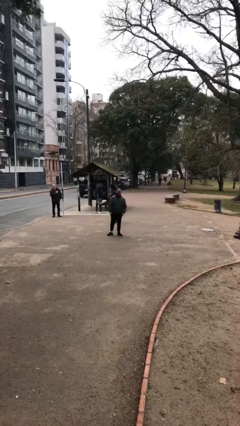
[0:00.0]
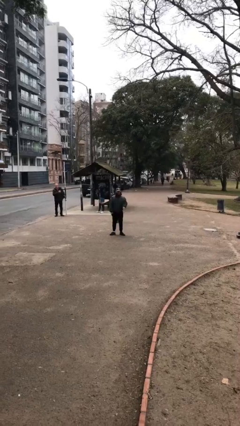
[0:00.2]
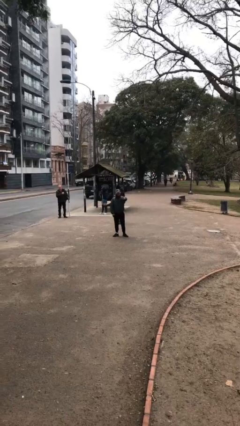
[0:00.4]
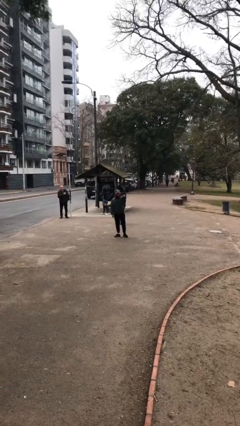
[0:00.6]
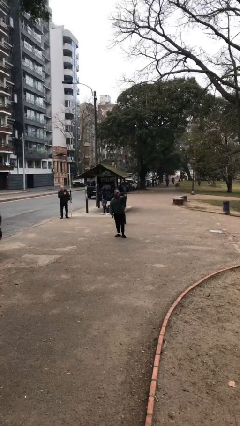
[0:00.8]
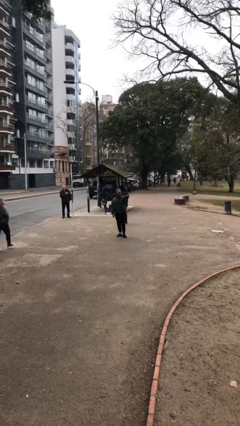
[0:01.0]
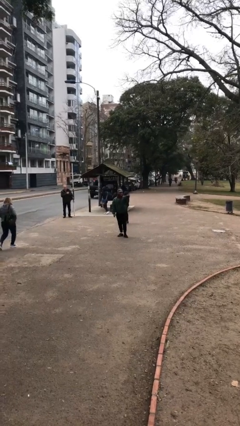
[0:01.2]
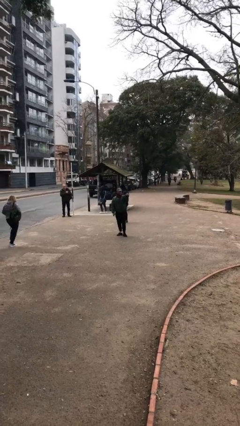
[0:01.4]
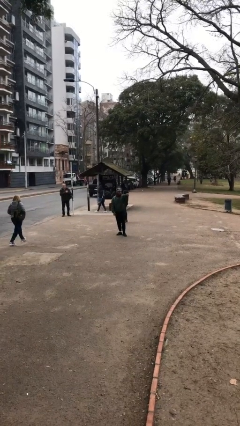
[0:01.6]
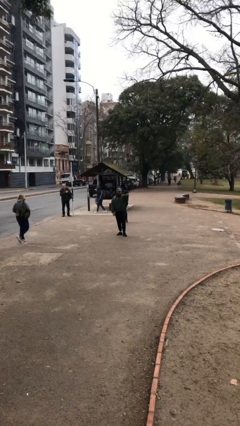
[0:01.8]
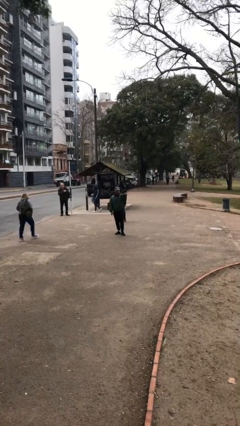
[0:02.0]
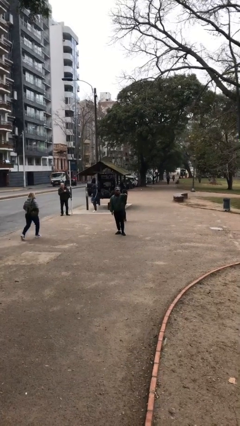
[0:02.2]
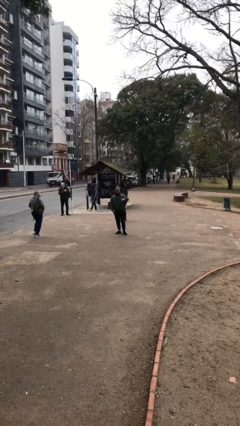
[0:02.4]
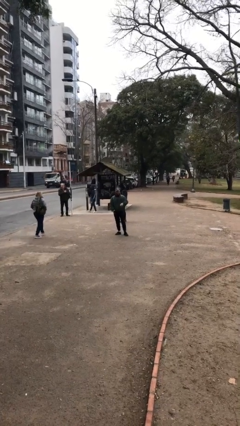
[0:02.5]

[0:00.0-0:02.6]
person points at person

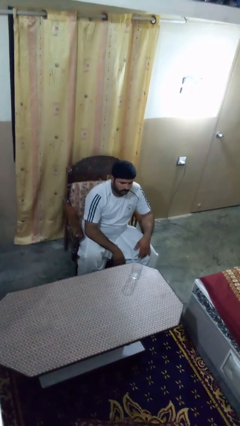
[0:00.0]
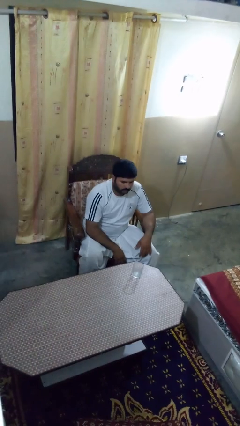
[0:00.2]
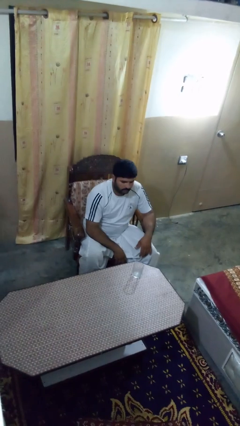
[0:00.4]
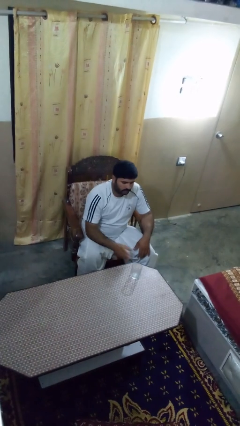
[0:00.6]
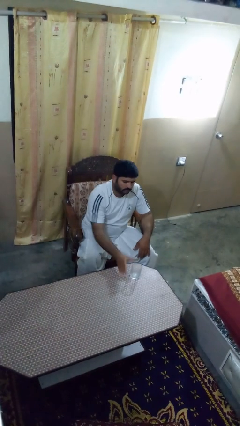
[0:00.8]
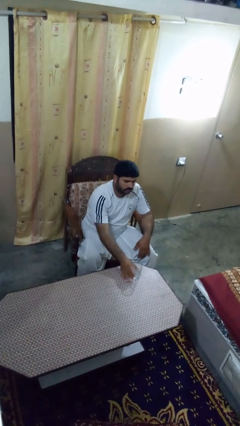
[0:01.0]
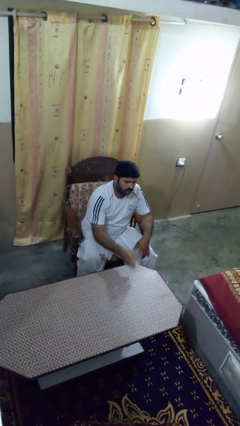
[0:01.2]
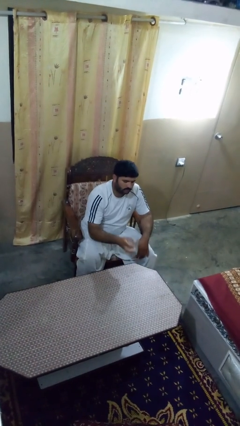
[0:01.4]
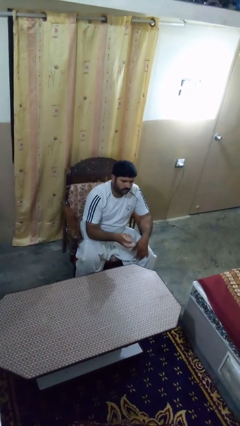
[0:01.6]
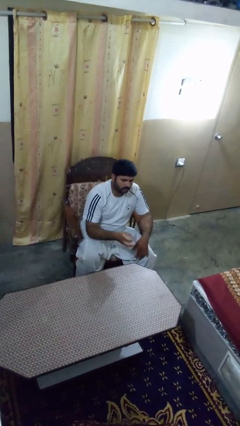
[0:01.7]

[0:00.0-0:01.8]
person picks up object from table

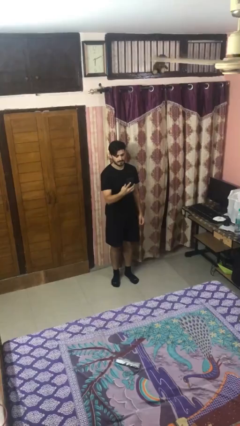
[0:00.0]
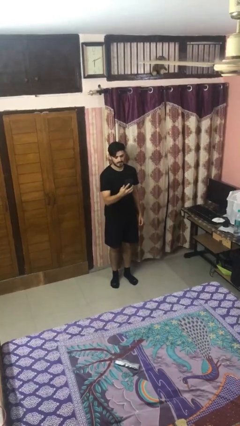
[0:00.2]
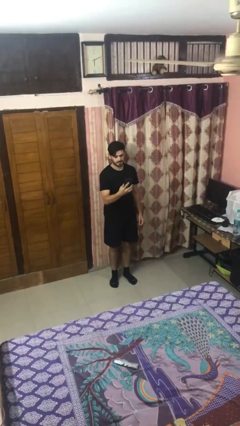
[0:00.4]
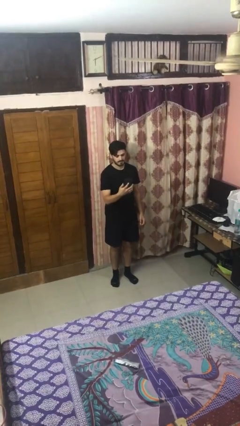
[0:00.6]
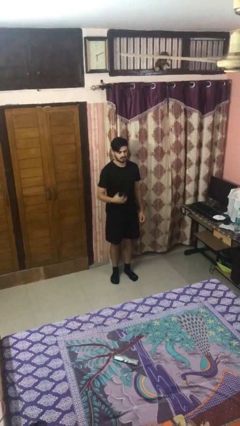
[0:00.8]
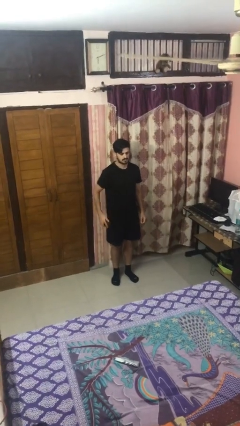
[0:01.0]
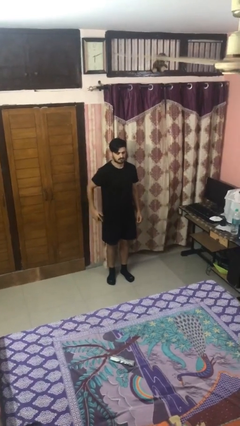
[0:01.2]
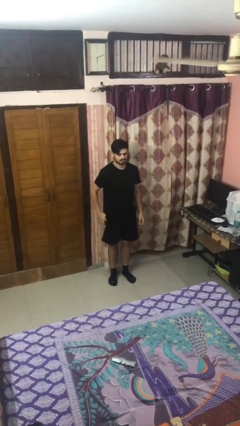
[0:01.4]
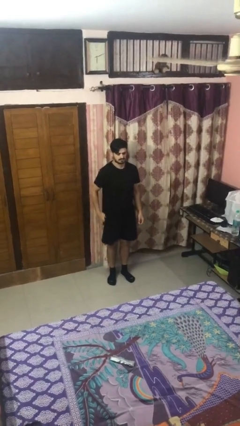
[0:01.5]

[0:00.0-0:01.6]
person puts phone into pocket

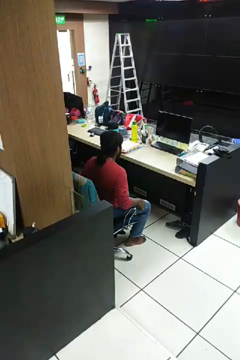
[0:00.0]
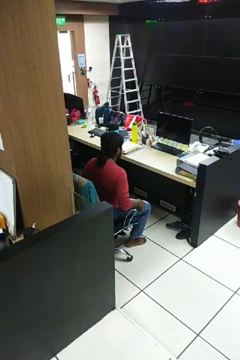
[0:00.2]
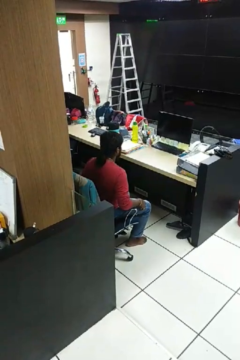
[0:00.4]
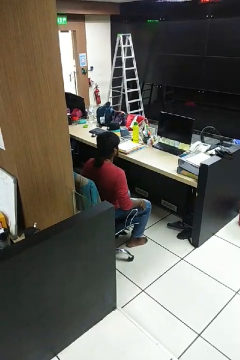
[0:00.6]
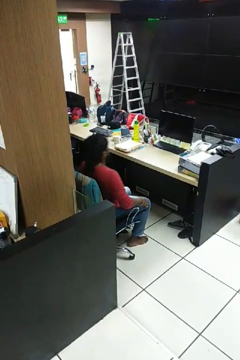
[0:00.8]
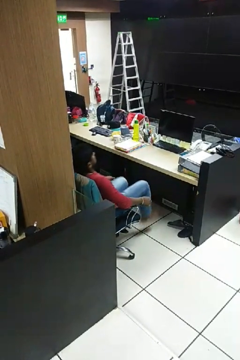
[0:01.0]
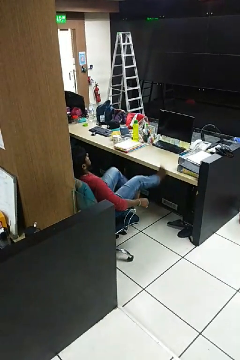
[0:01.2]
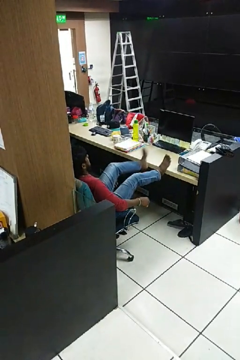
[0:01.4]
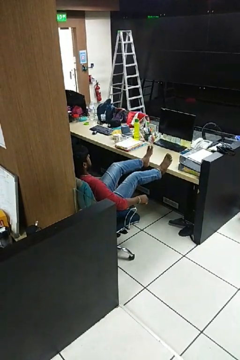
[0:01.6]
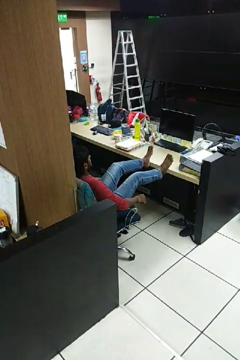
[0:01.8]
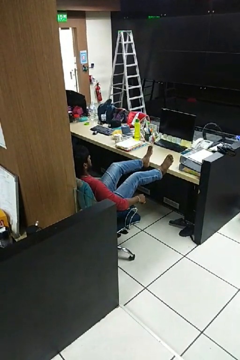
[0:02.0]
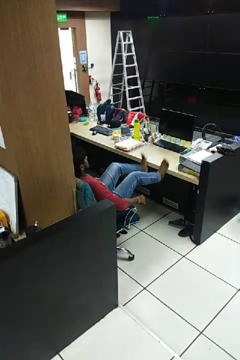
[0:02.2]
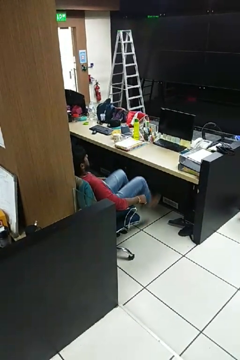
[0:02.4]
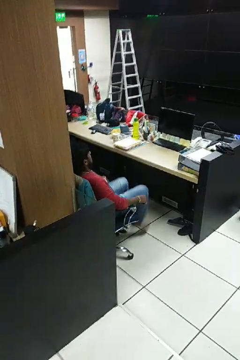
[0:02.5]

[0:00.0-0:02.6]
person puts feet up

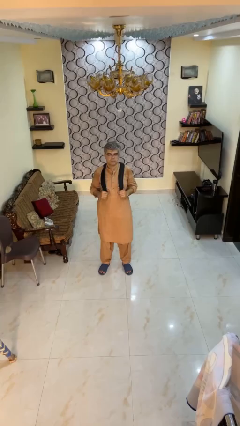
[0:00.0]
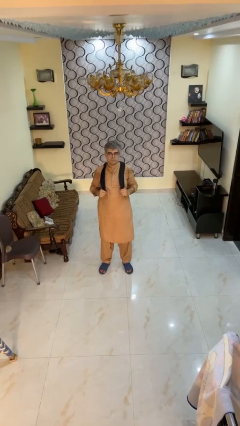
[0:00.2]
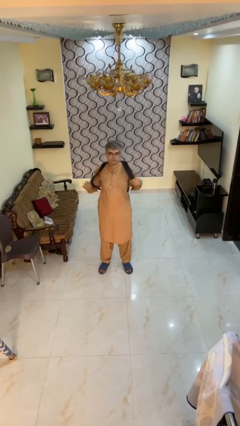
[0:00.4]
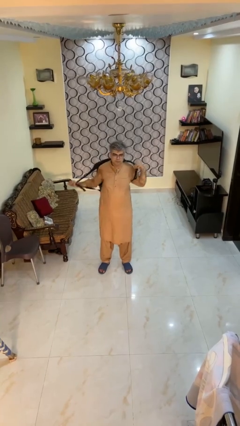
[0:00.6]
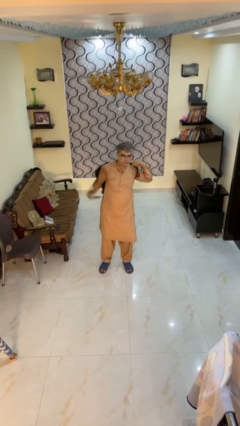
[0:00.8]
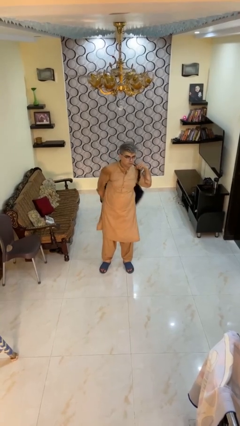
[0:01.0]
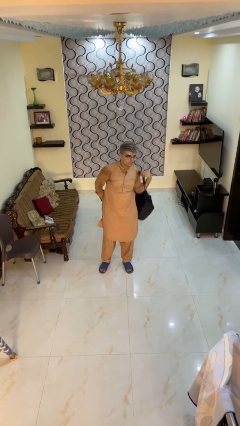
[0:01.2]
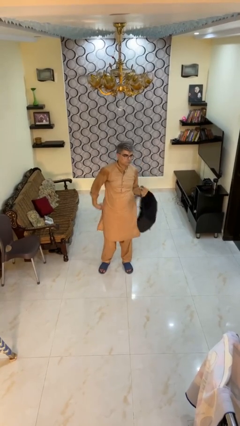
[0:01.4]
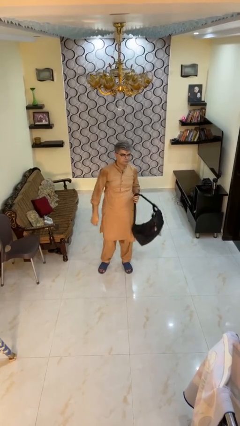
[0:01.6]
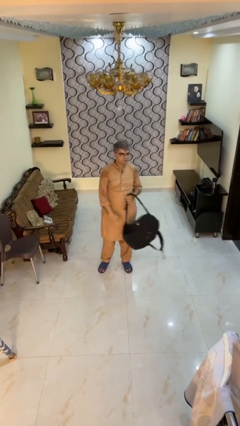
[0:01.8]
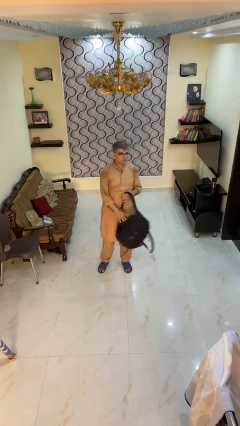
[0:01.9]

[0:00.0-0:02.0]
person takes off backpack

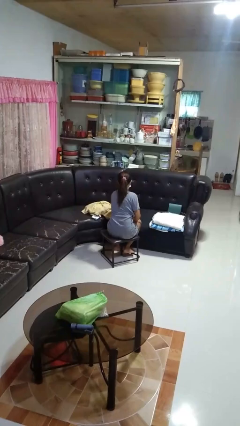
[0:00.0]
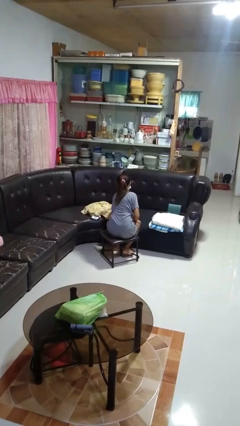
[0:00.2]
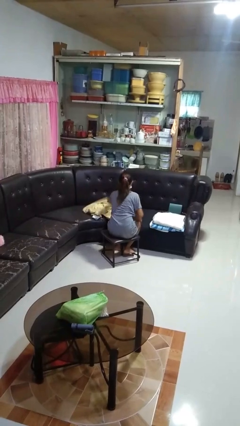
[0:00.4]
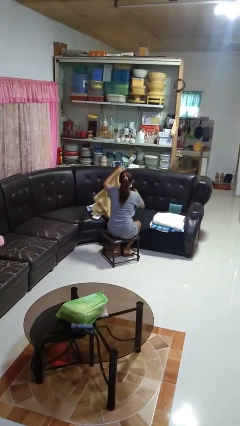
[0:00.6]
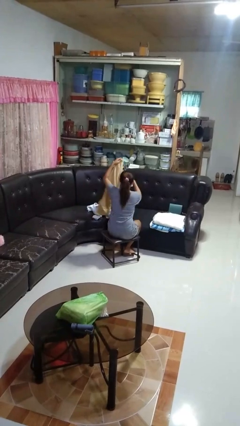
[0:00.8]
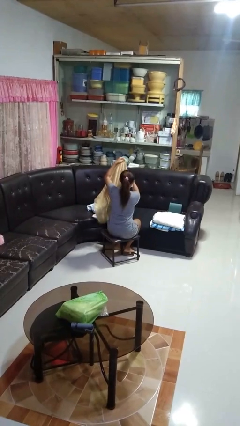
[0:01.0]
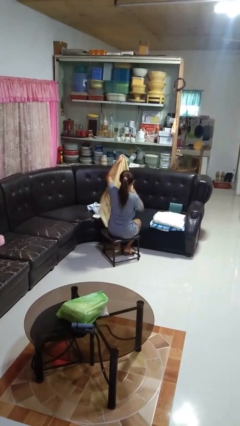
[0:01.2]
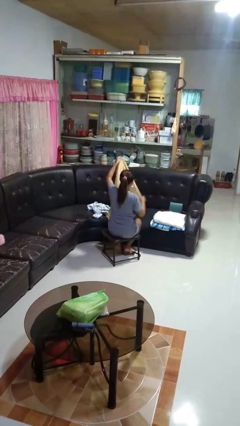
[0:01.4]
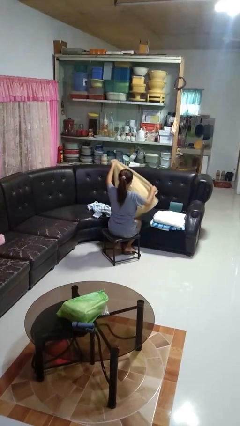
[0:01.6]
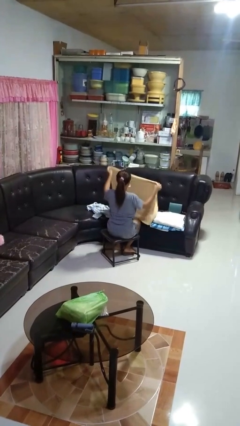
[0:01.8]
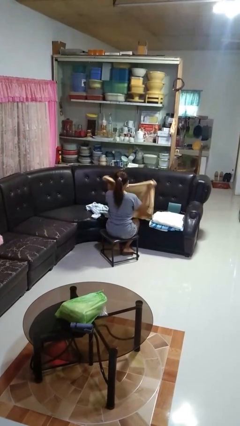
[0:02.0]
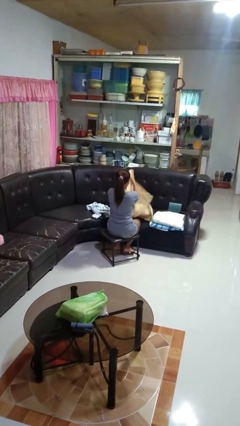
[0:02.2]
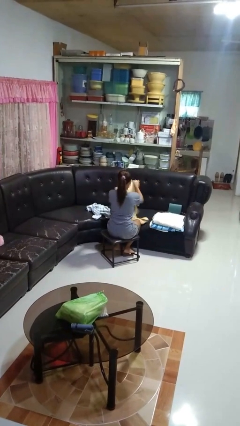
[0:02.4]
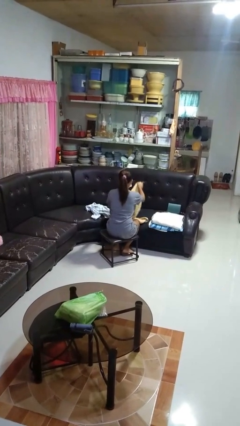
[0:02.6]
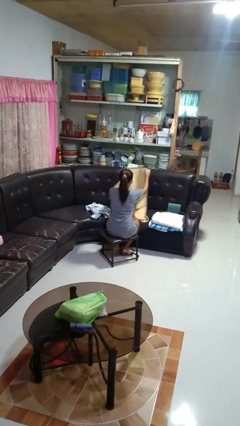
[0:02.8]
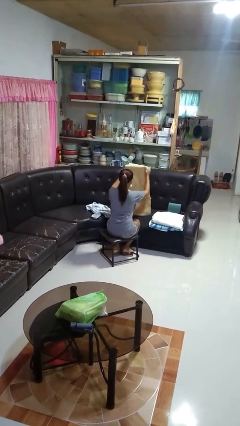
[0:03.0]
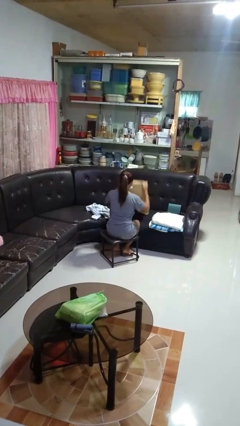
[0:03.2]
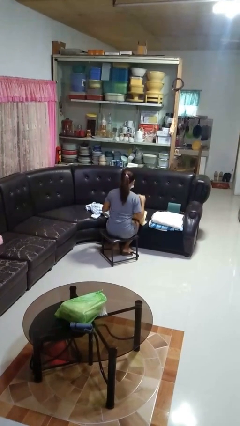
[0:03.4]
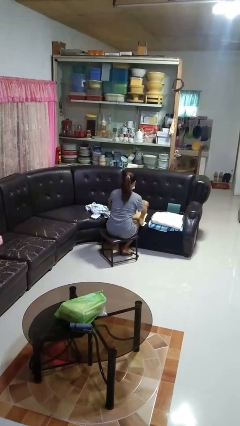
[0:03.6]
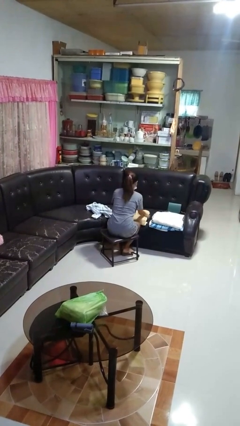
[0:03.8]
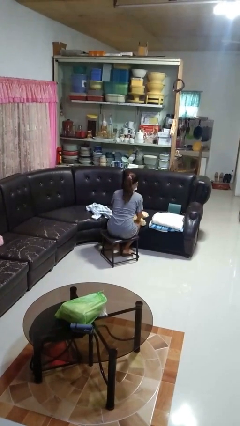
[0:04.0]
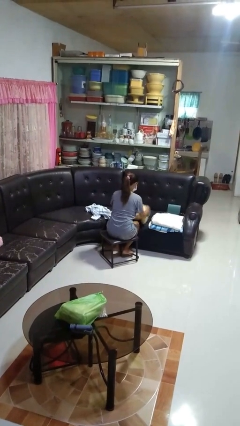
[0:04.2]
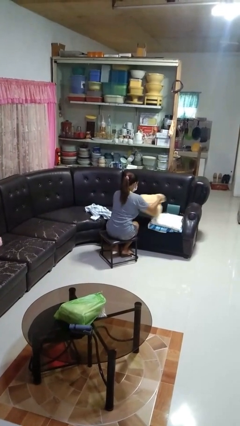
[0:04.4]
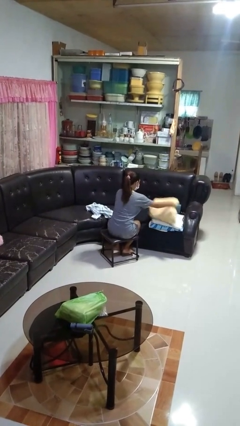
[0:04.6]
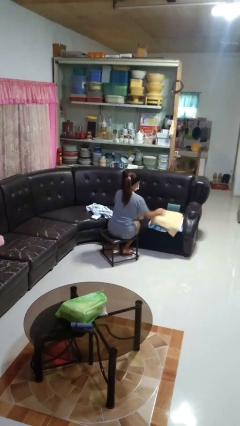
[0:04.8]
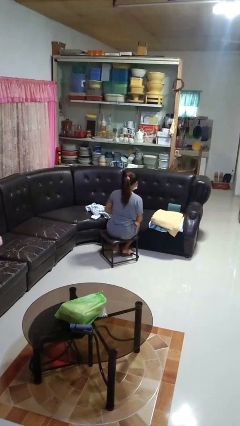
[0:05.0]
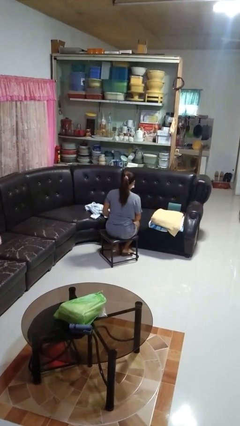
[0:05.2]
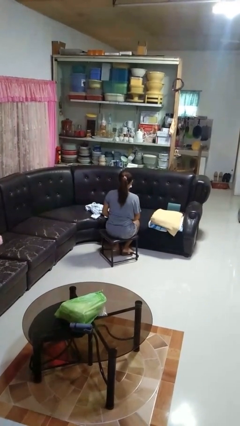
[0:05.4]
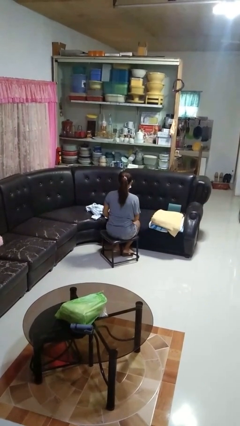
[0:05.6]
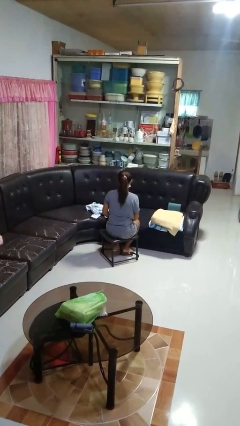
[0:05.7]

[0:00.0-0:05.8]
person folds towel

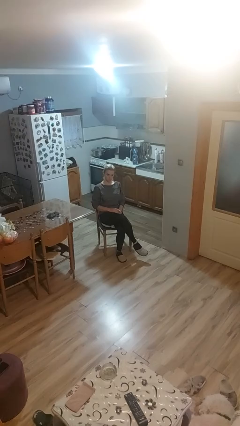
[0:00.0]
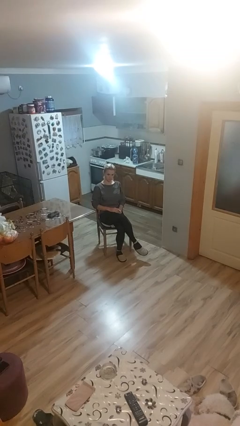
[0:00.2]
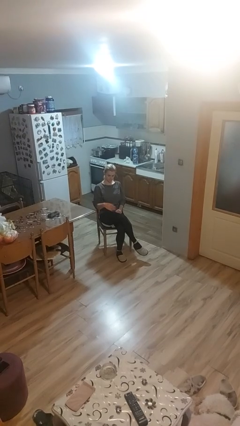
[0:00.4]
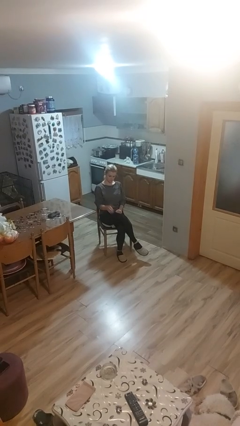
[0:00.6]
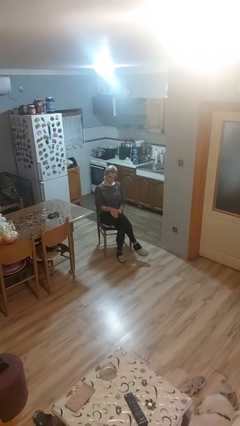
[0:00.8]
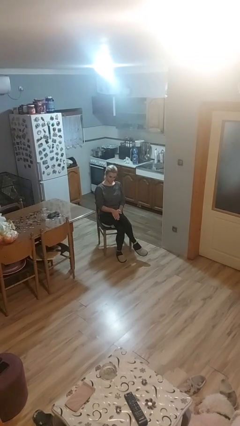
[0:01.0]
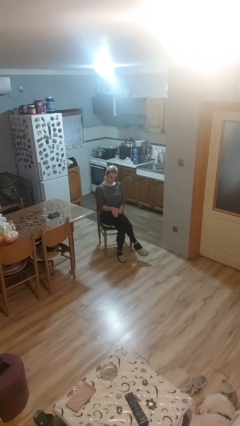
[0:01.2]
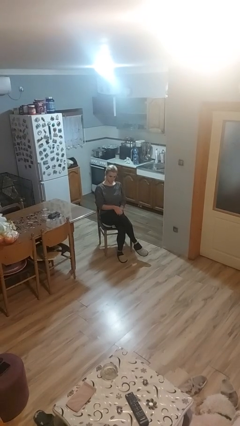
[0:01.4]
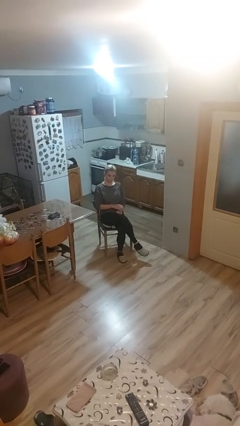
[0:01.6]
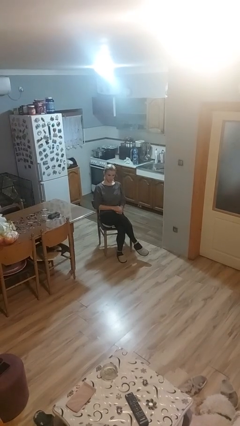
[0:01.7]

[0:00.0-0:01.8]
person slaps hands on thighs
